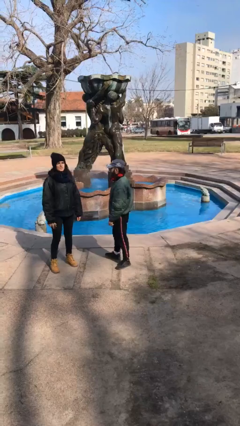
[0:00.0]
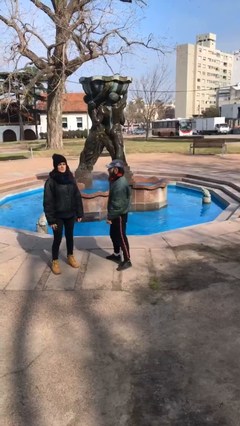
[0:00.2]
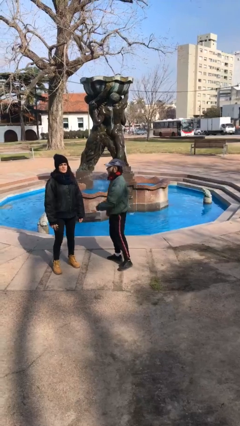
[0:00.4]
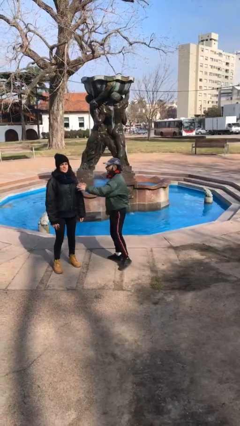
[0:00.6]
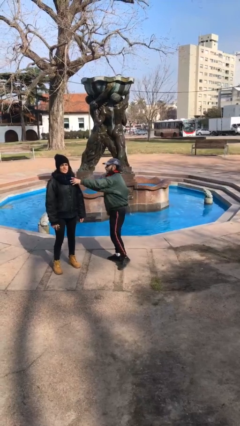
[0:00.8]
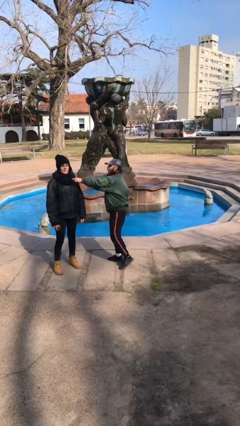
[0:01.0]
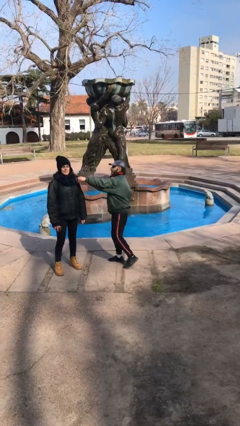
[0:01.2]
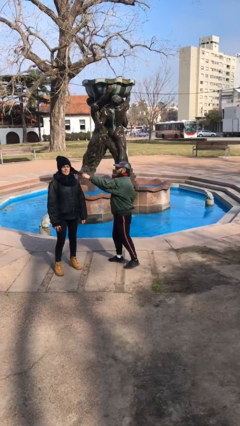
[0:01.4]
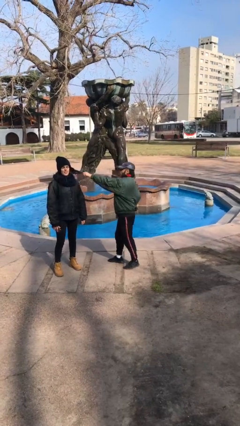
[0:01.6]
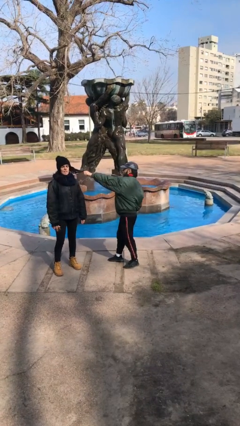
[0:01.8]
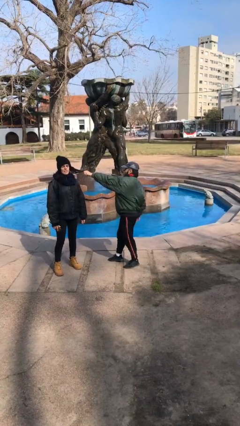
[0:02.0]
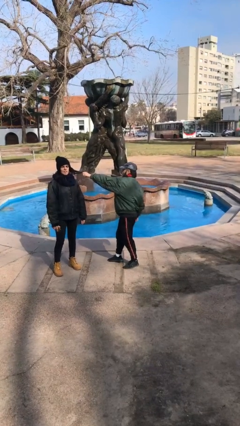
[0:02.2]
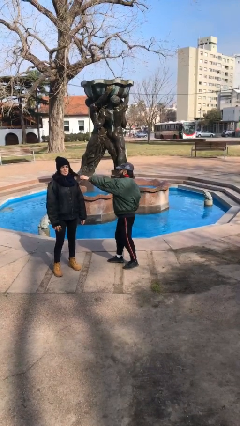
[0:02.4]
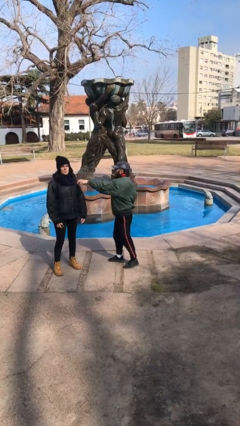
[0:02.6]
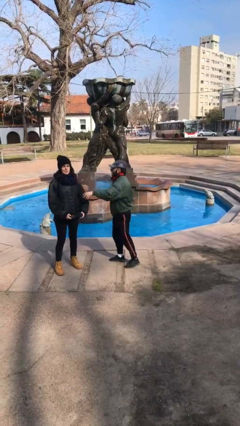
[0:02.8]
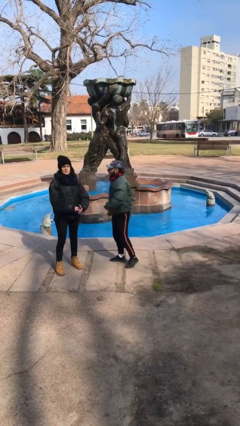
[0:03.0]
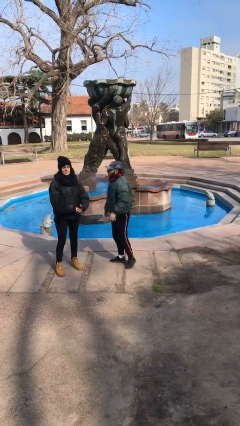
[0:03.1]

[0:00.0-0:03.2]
person grabs person by hair

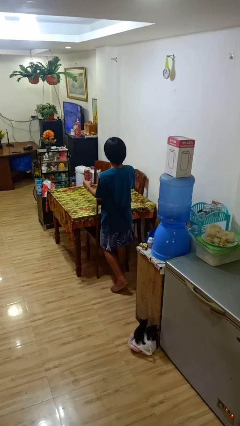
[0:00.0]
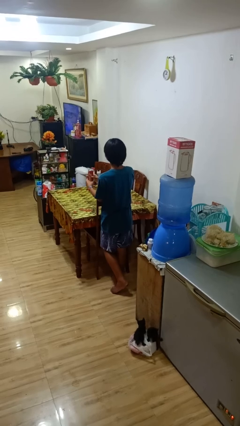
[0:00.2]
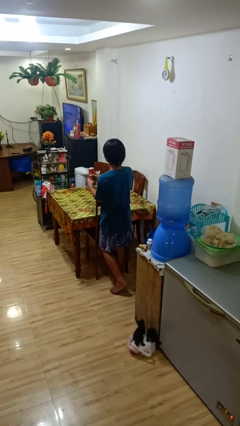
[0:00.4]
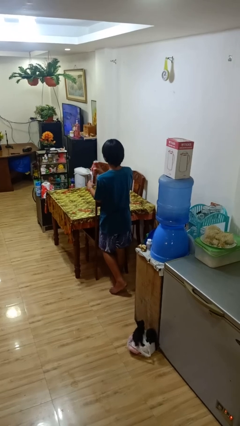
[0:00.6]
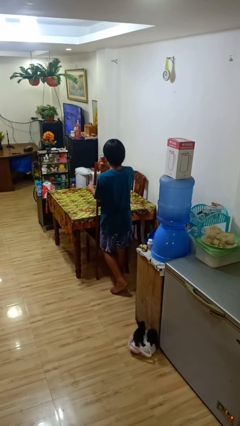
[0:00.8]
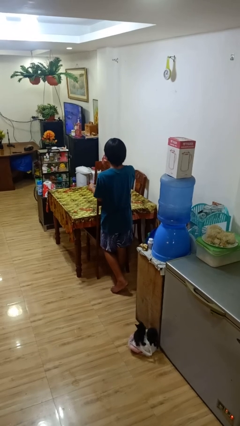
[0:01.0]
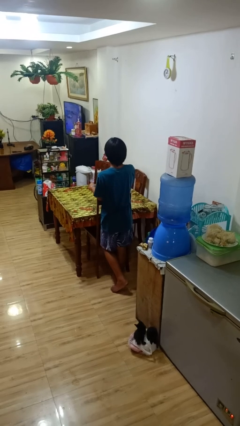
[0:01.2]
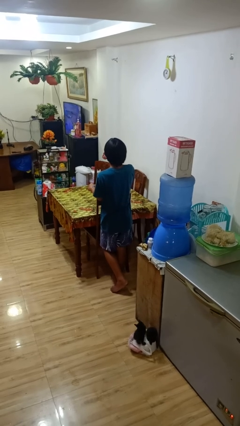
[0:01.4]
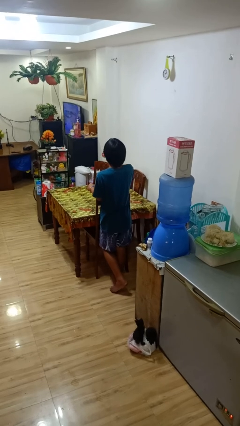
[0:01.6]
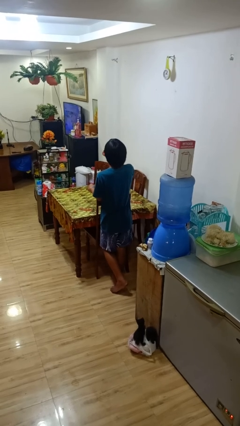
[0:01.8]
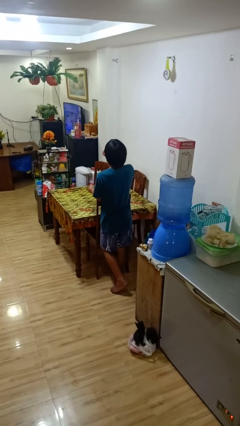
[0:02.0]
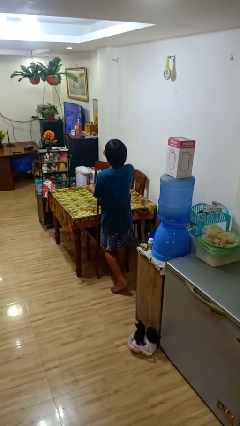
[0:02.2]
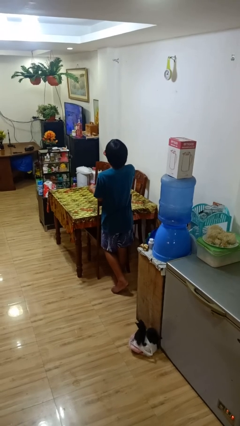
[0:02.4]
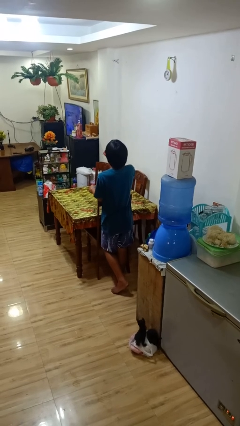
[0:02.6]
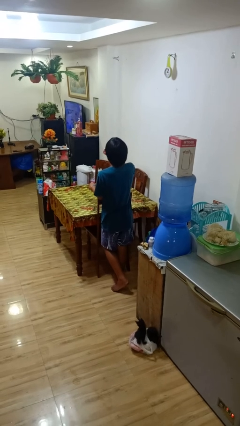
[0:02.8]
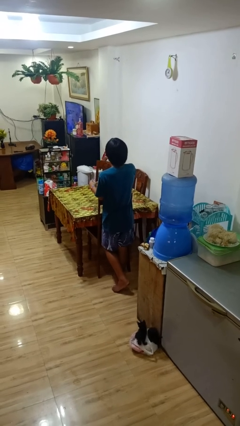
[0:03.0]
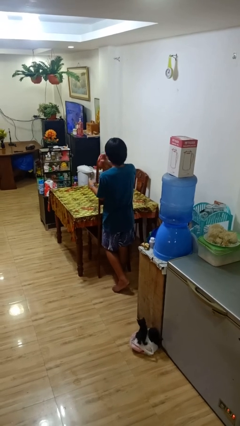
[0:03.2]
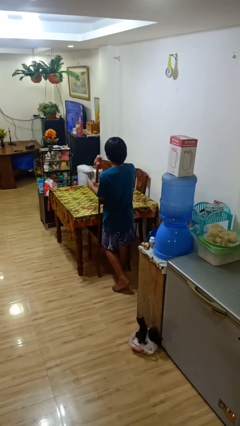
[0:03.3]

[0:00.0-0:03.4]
person drinks from beverage can

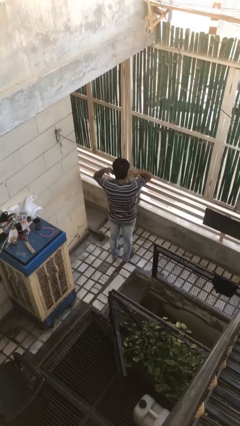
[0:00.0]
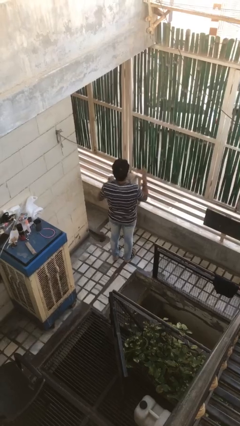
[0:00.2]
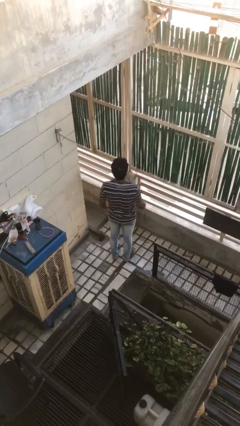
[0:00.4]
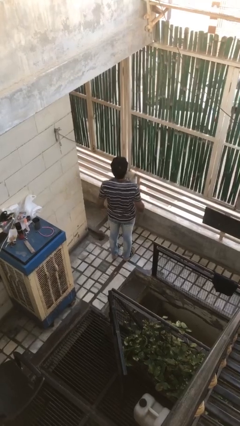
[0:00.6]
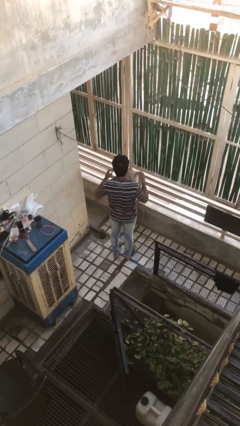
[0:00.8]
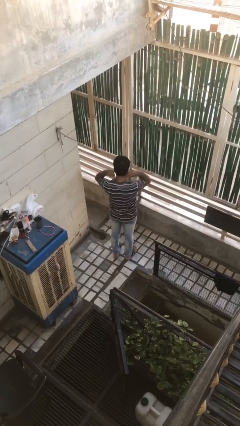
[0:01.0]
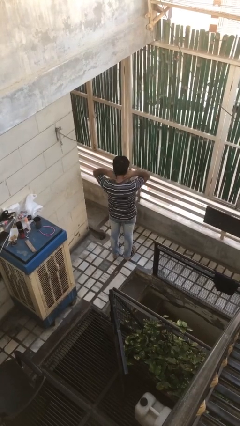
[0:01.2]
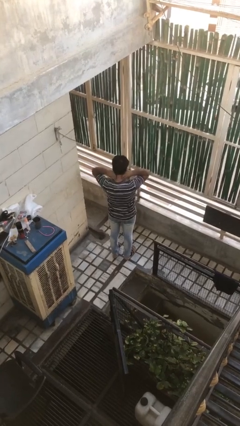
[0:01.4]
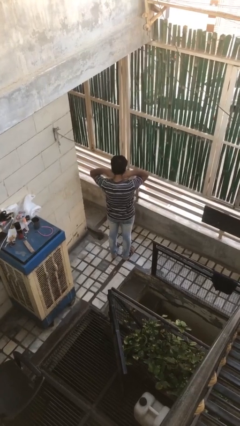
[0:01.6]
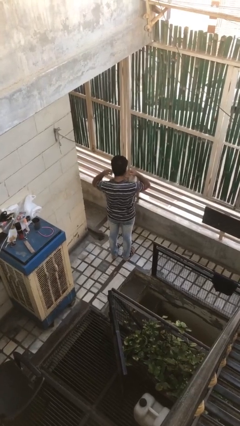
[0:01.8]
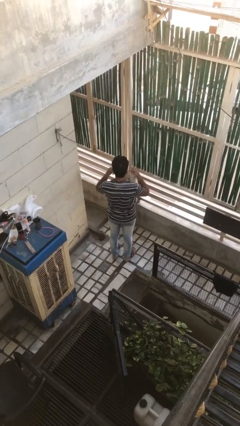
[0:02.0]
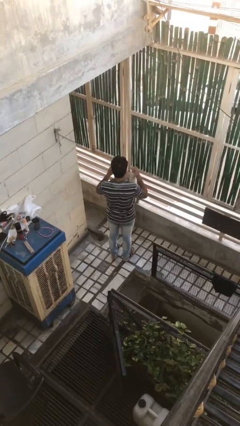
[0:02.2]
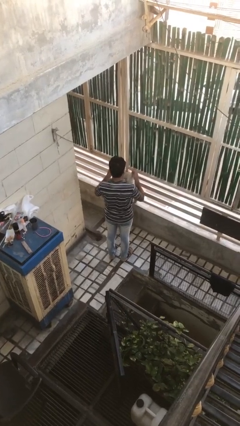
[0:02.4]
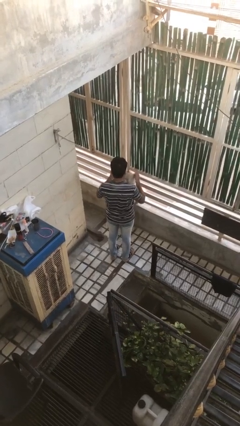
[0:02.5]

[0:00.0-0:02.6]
person takes off necklace

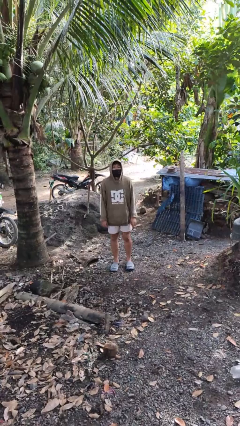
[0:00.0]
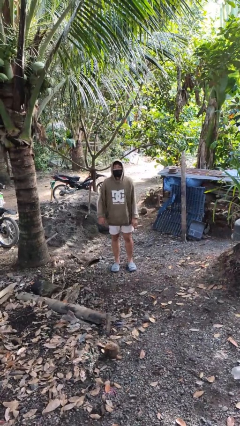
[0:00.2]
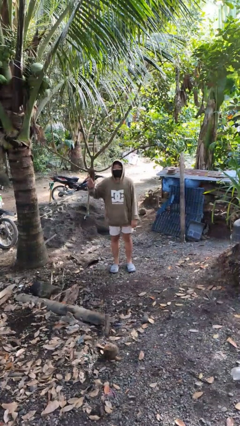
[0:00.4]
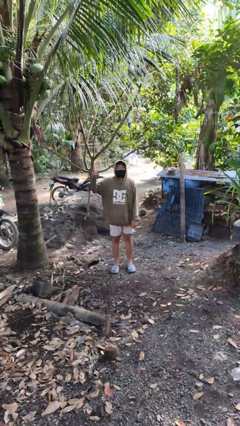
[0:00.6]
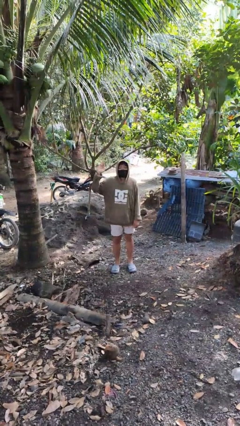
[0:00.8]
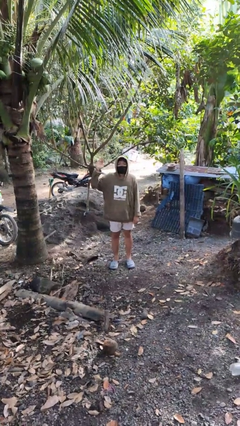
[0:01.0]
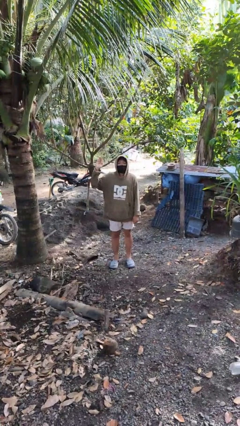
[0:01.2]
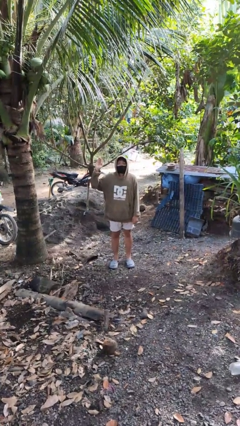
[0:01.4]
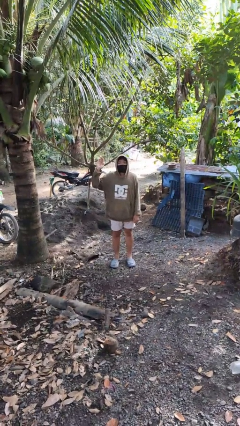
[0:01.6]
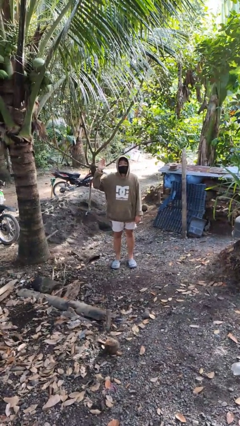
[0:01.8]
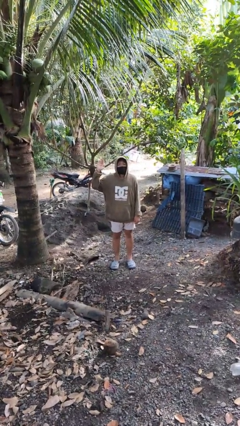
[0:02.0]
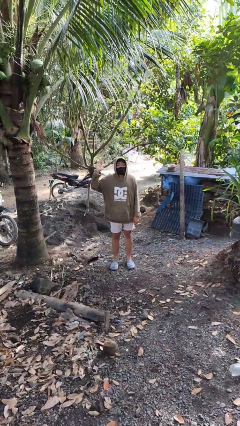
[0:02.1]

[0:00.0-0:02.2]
person gestures number five

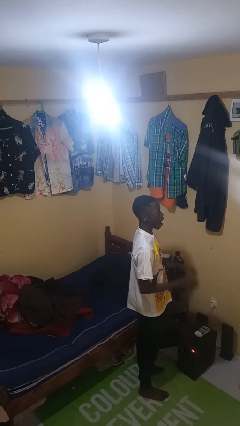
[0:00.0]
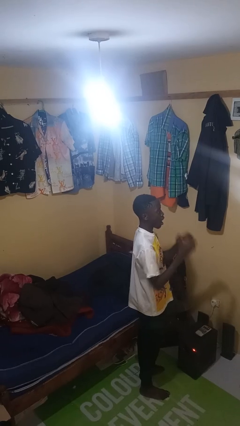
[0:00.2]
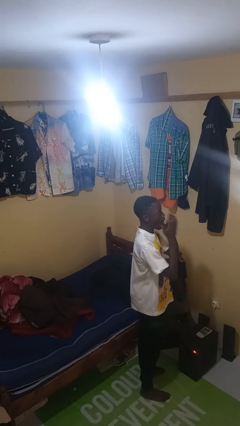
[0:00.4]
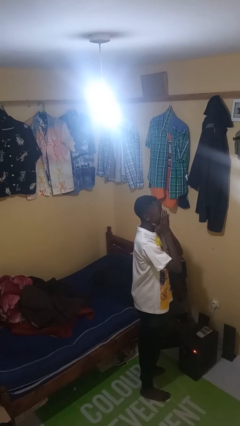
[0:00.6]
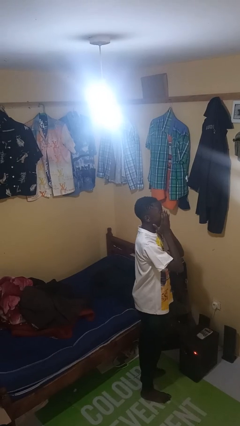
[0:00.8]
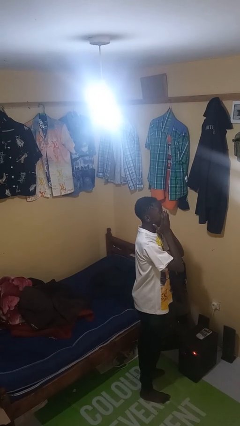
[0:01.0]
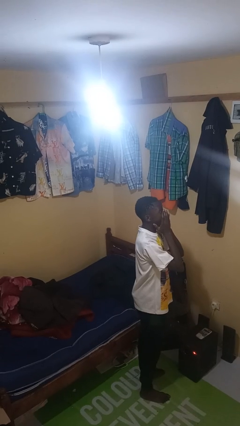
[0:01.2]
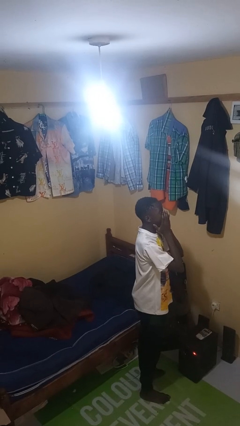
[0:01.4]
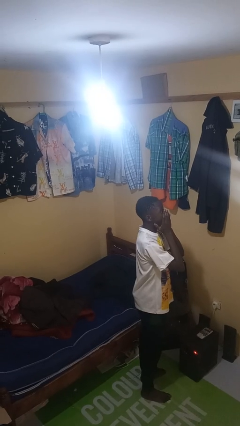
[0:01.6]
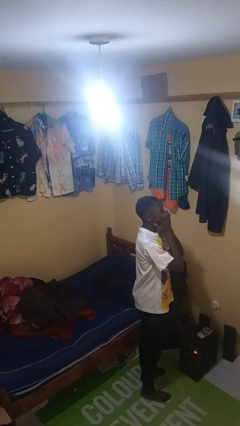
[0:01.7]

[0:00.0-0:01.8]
person covers face with hands

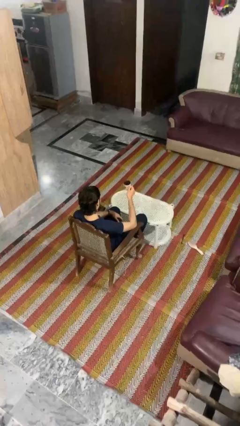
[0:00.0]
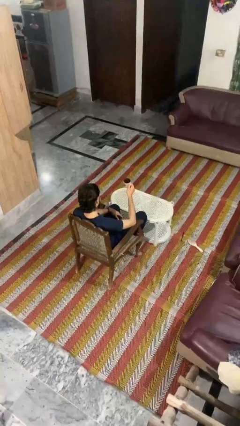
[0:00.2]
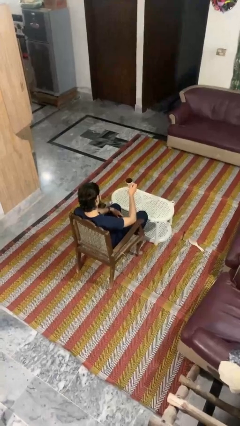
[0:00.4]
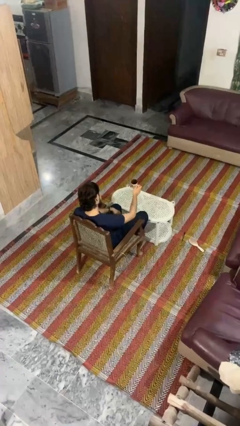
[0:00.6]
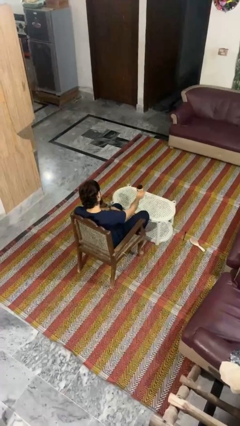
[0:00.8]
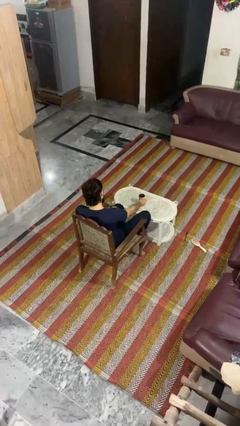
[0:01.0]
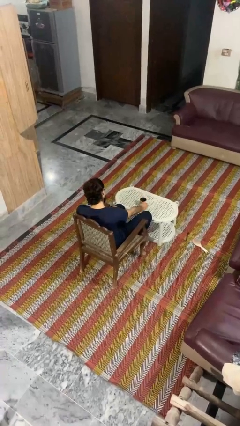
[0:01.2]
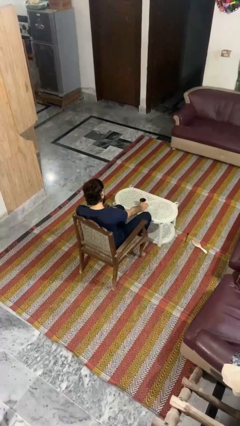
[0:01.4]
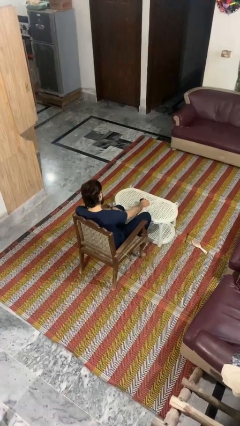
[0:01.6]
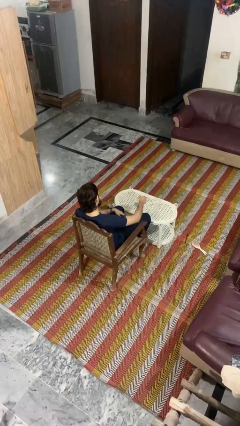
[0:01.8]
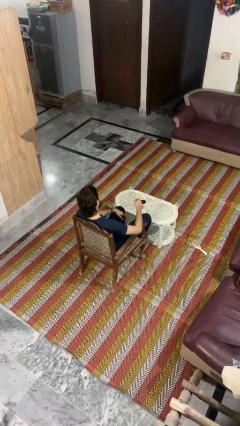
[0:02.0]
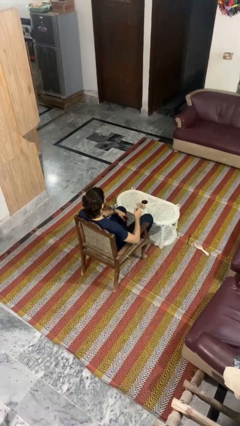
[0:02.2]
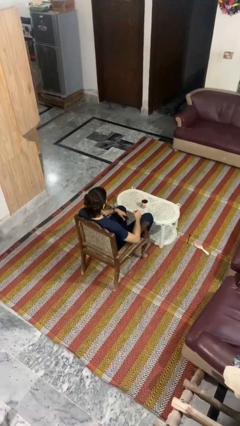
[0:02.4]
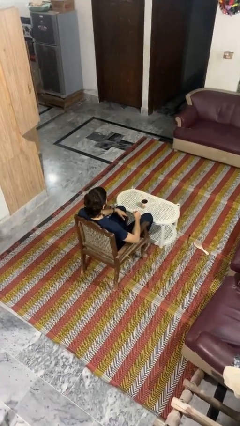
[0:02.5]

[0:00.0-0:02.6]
person puts down object on table

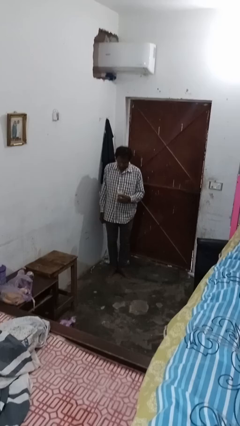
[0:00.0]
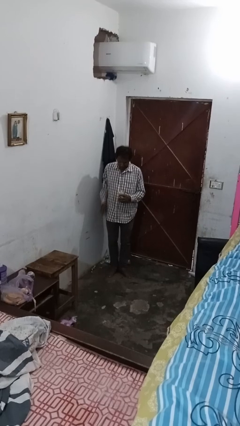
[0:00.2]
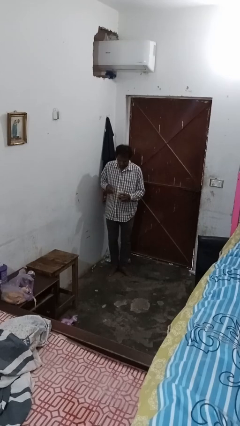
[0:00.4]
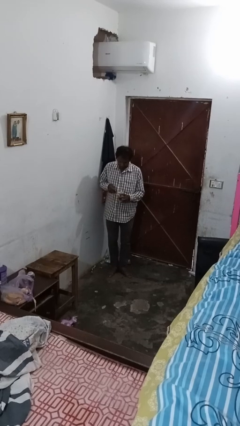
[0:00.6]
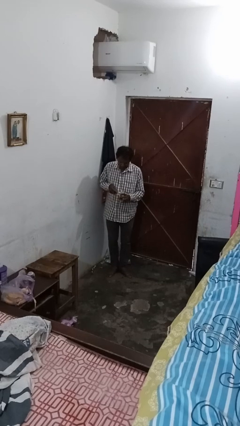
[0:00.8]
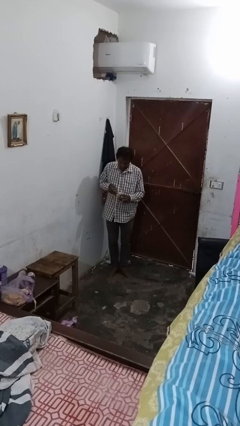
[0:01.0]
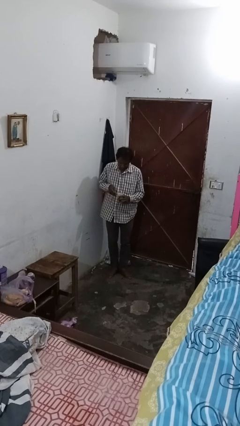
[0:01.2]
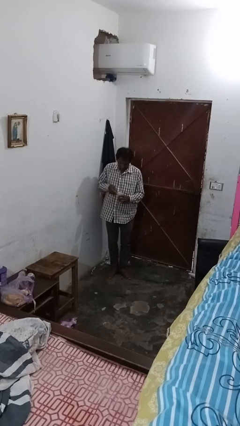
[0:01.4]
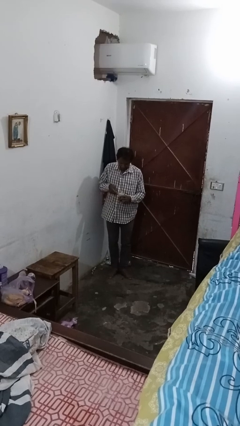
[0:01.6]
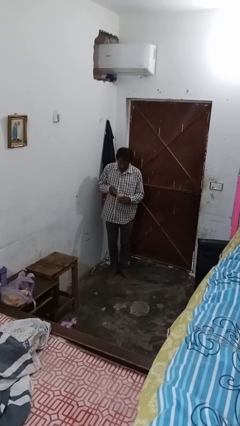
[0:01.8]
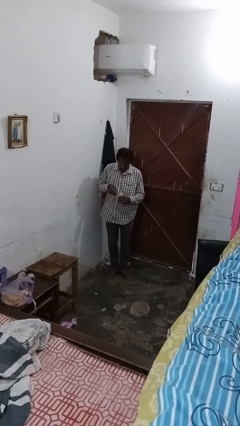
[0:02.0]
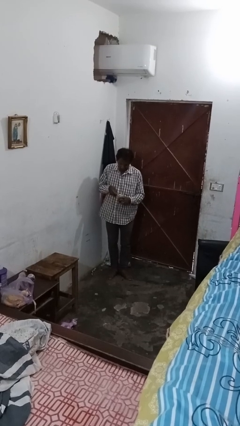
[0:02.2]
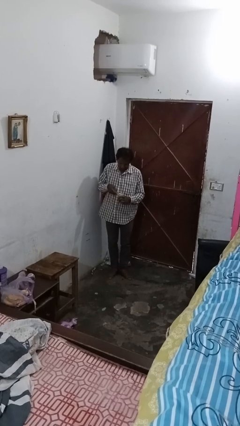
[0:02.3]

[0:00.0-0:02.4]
person opens can with can opener
